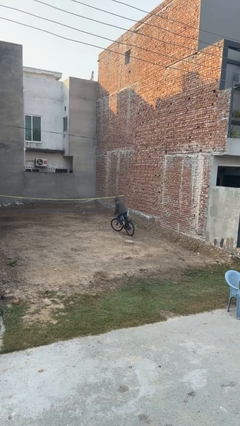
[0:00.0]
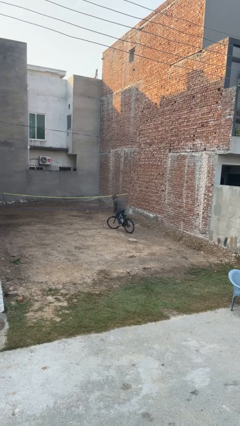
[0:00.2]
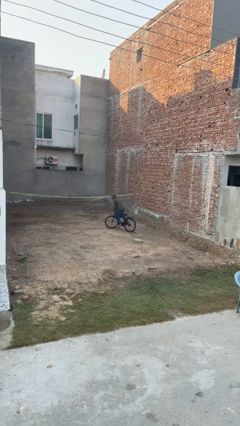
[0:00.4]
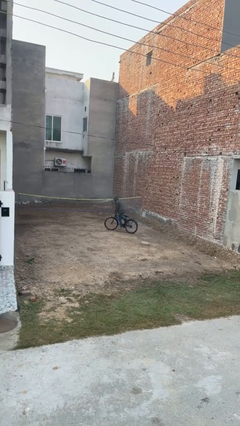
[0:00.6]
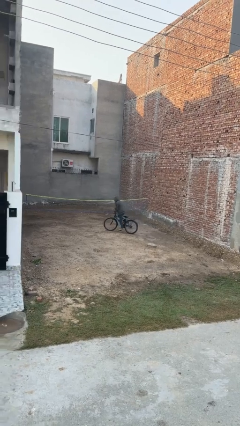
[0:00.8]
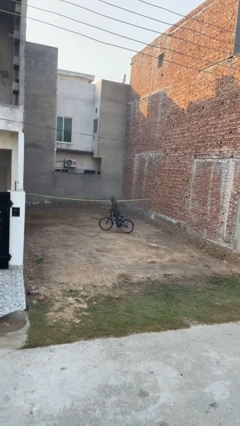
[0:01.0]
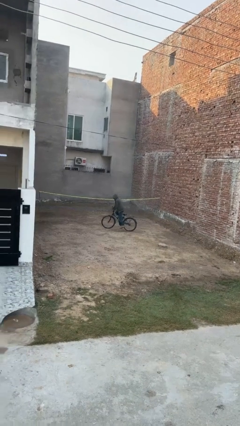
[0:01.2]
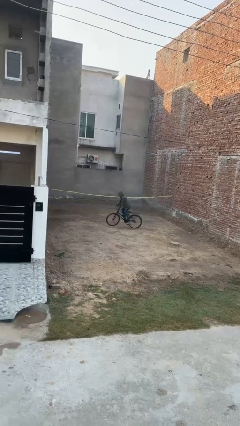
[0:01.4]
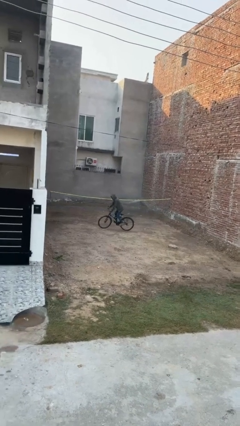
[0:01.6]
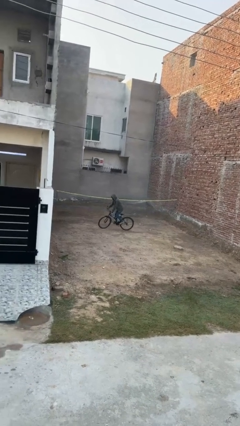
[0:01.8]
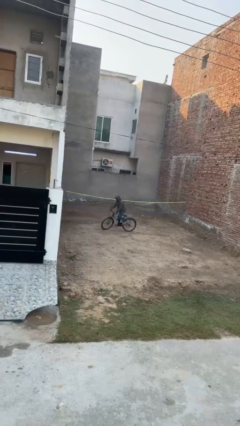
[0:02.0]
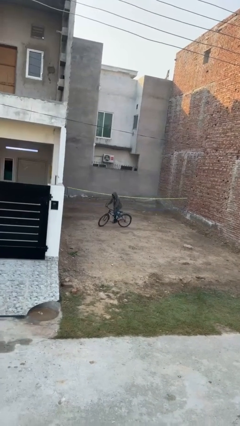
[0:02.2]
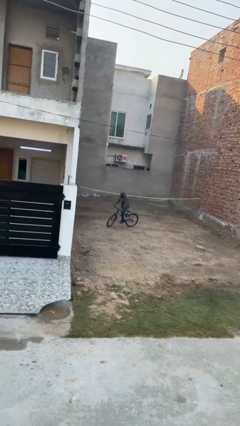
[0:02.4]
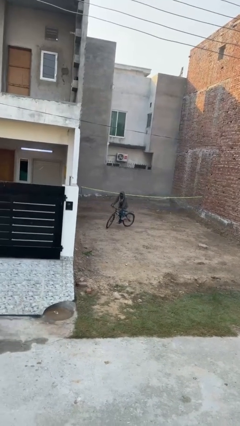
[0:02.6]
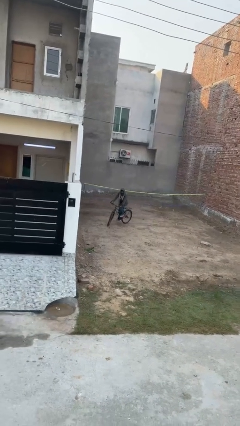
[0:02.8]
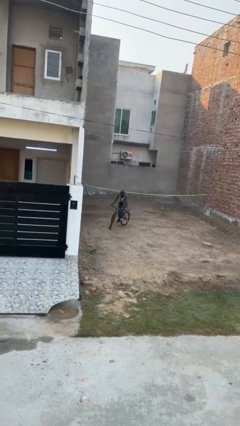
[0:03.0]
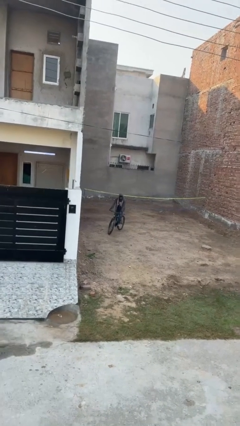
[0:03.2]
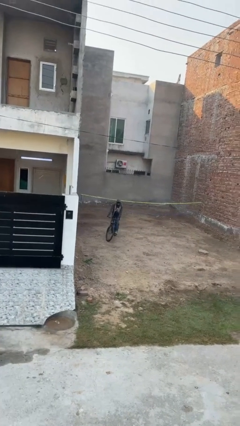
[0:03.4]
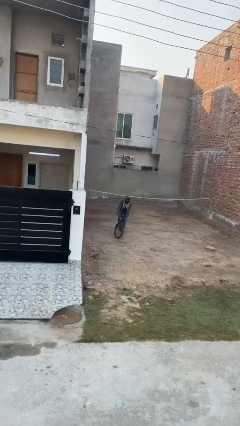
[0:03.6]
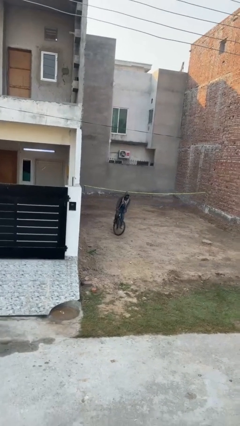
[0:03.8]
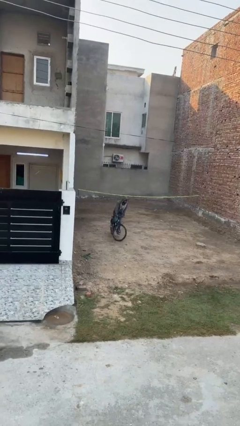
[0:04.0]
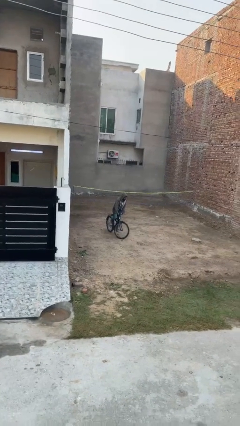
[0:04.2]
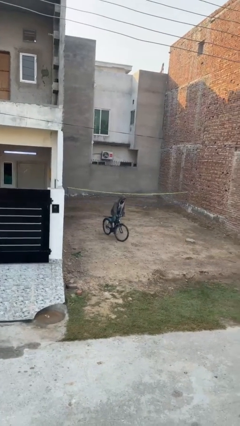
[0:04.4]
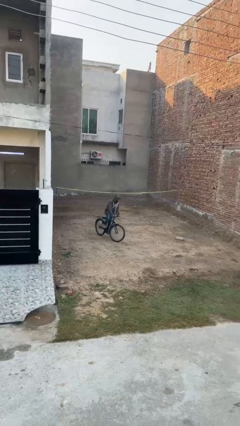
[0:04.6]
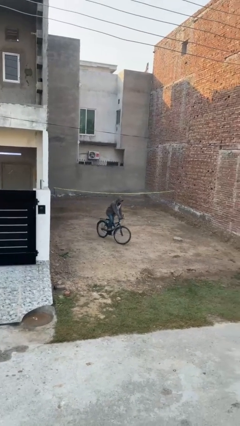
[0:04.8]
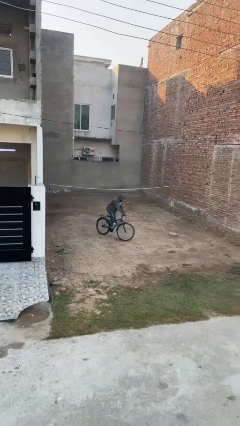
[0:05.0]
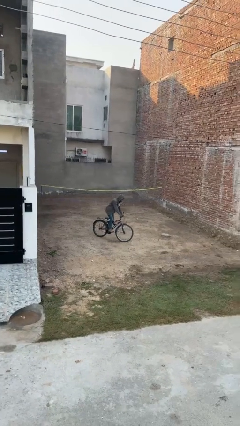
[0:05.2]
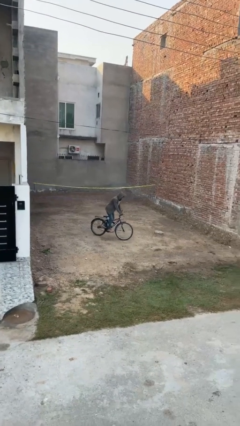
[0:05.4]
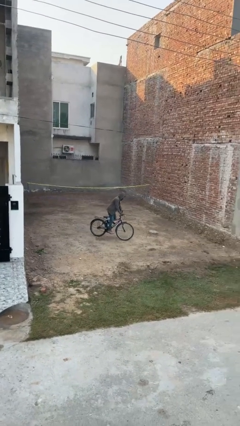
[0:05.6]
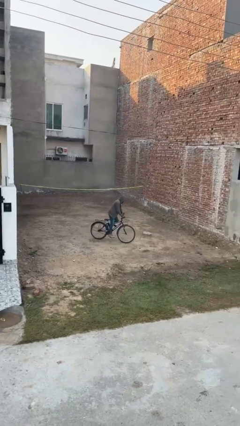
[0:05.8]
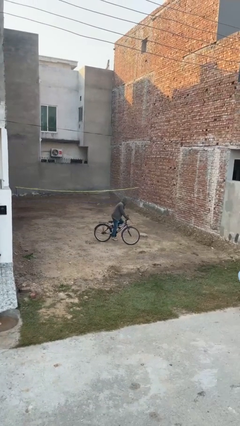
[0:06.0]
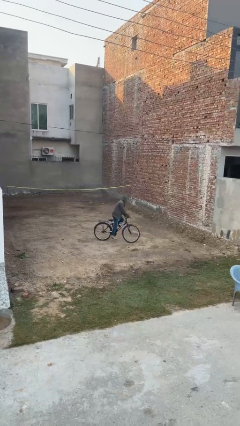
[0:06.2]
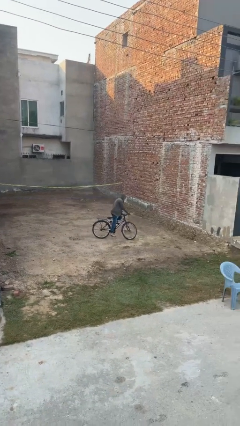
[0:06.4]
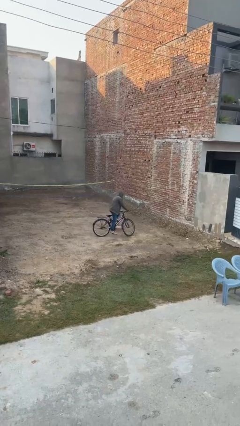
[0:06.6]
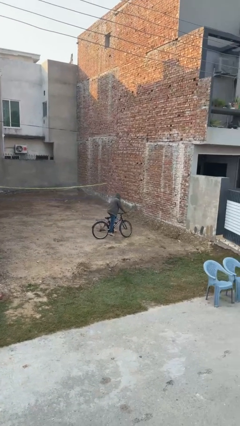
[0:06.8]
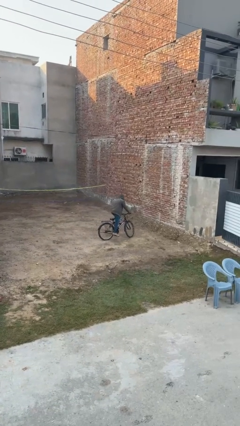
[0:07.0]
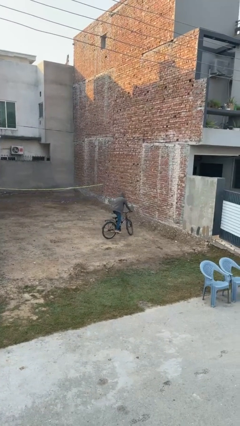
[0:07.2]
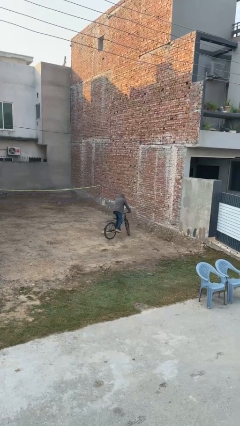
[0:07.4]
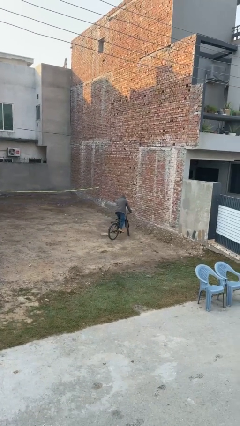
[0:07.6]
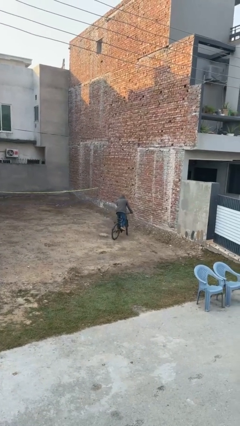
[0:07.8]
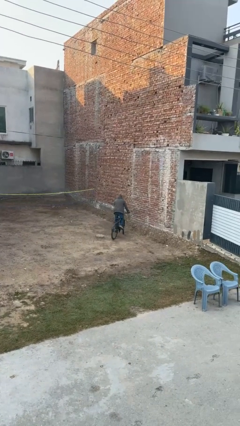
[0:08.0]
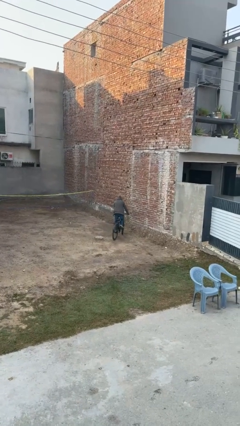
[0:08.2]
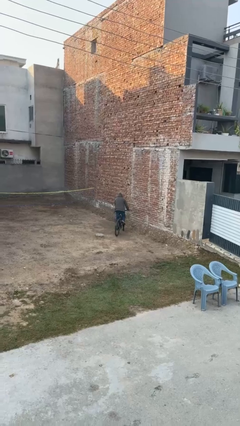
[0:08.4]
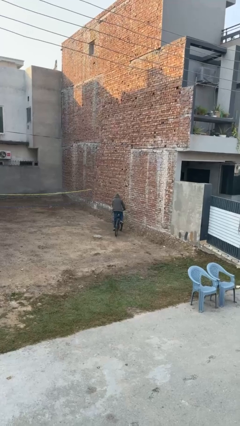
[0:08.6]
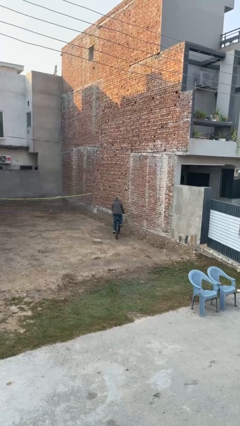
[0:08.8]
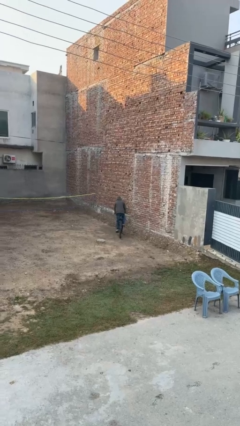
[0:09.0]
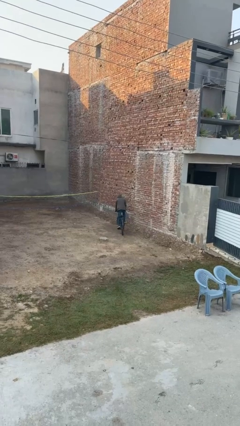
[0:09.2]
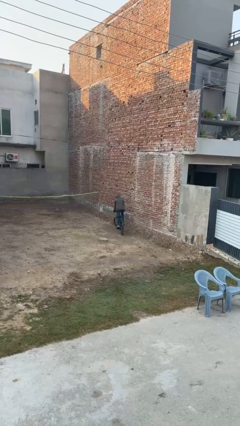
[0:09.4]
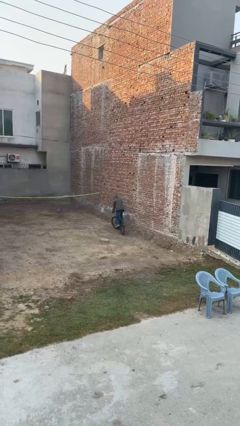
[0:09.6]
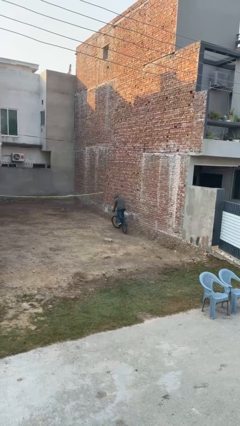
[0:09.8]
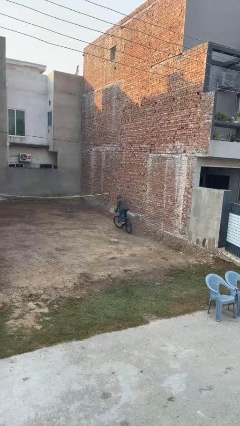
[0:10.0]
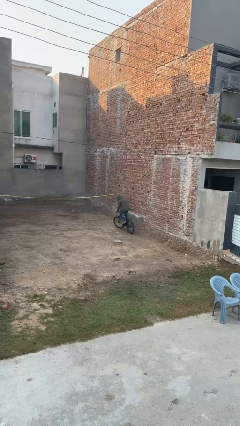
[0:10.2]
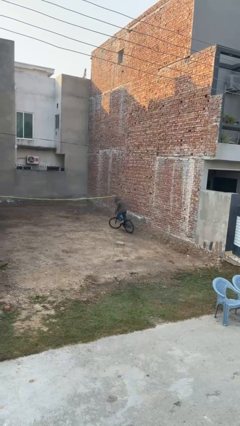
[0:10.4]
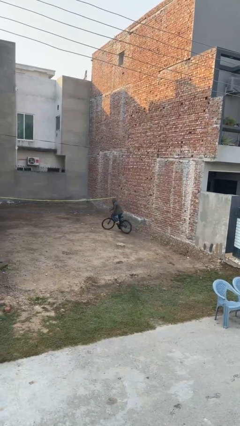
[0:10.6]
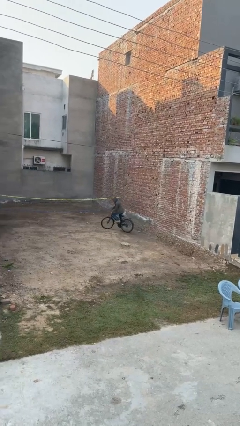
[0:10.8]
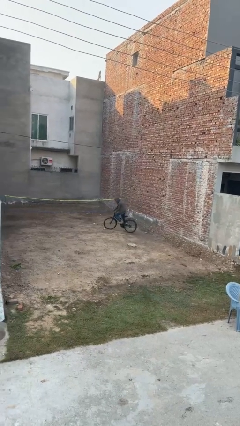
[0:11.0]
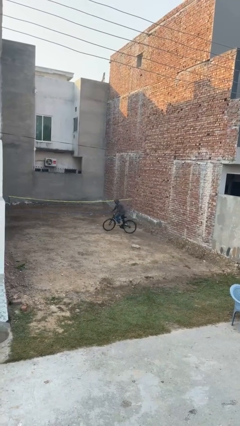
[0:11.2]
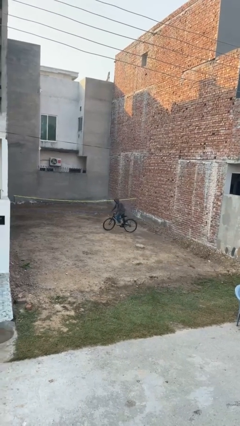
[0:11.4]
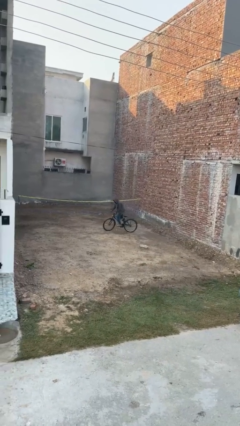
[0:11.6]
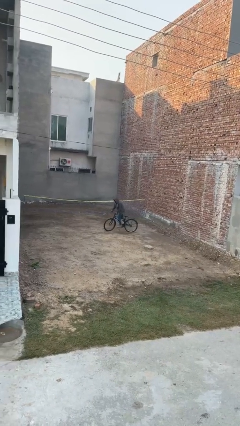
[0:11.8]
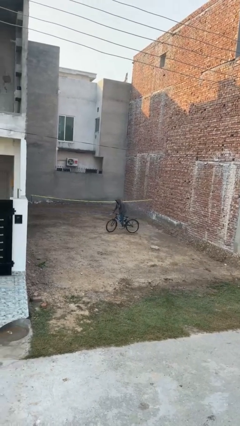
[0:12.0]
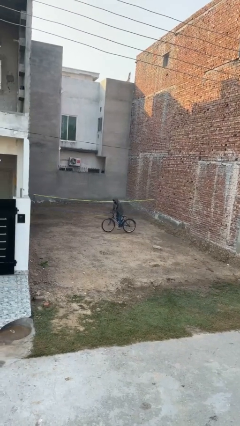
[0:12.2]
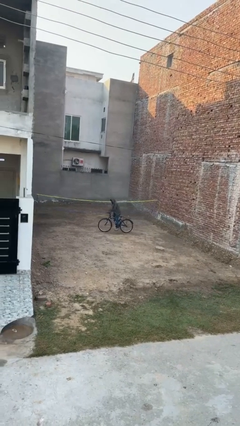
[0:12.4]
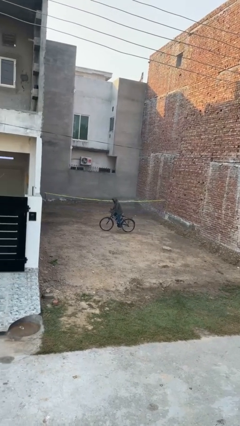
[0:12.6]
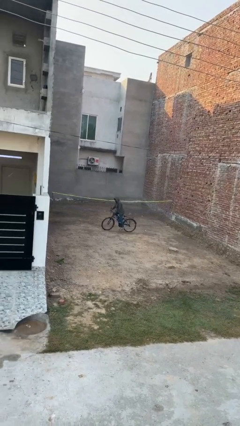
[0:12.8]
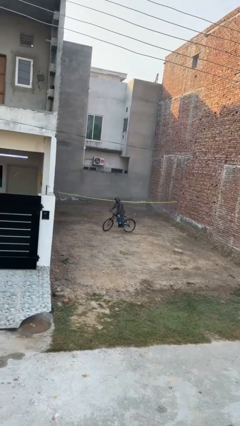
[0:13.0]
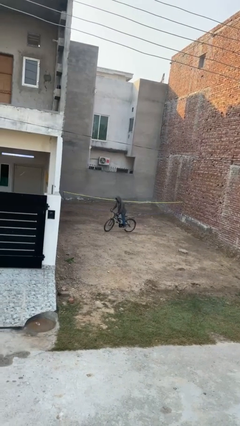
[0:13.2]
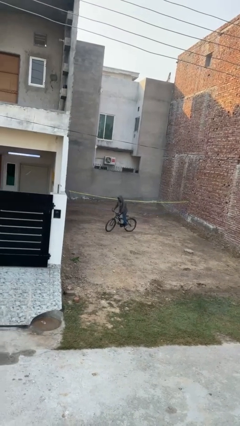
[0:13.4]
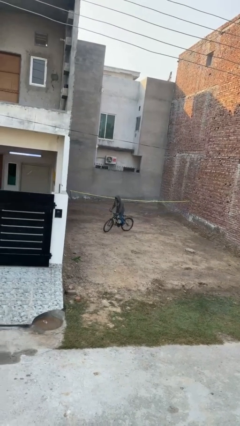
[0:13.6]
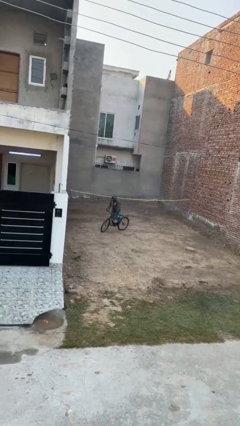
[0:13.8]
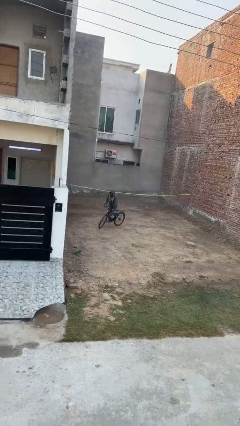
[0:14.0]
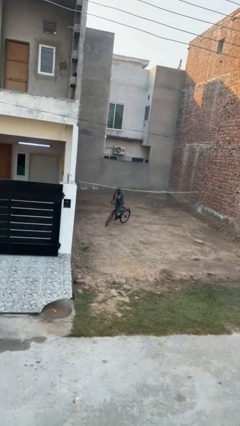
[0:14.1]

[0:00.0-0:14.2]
person rides bicycle

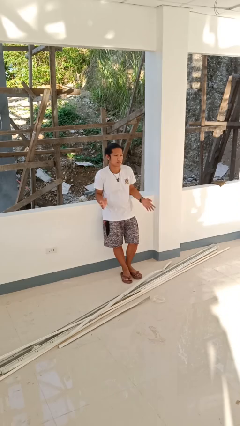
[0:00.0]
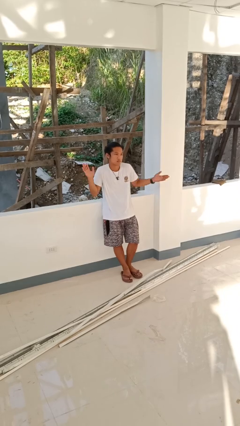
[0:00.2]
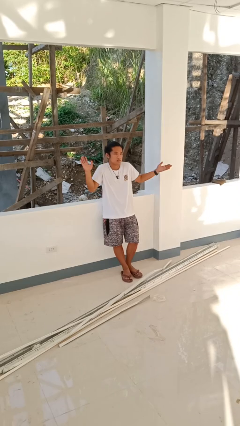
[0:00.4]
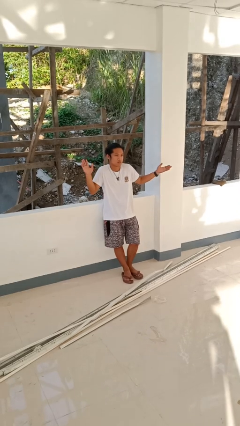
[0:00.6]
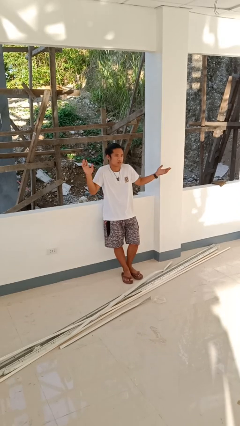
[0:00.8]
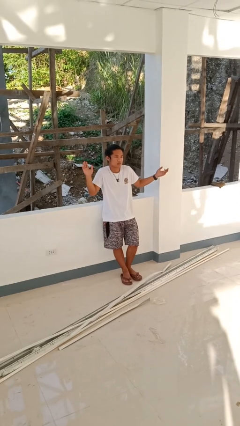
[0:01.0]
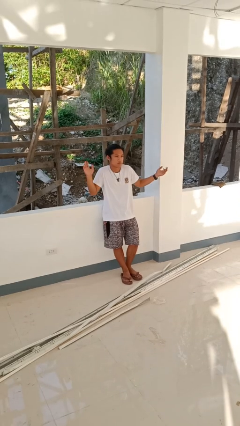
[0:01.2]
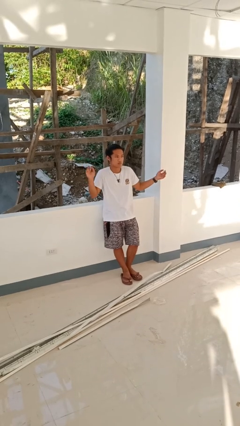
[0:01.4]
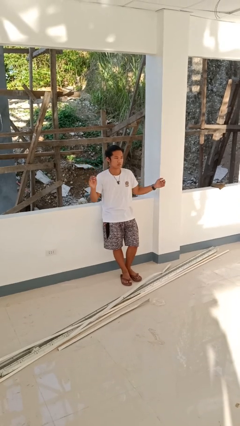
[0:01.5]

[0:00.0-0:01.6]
person shrugs

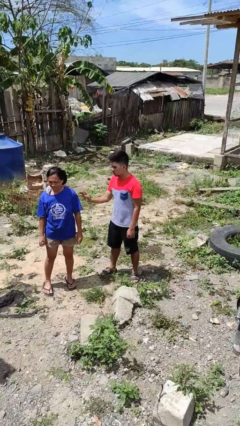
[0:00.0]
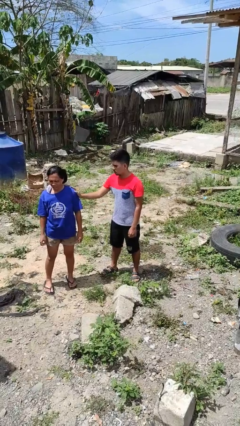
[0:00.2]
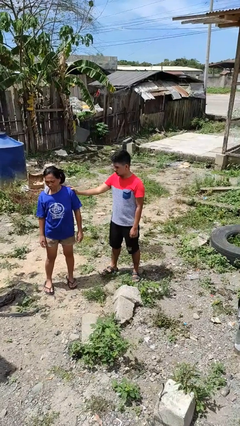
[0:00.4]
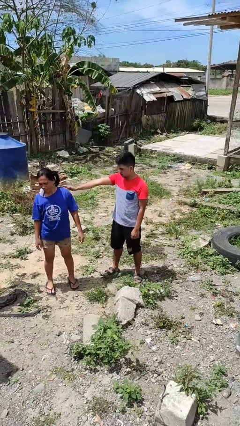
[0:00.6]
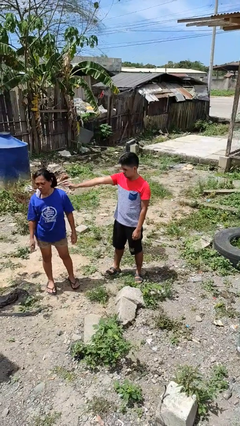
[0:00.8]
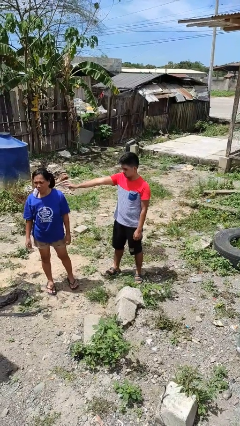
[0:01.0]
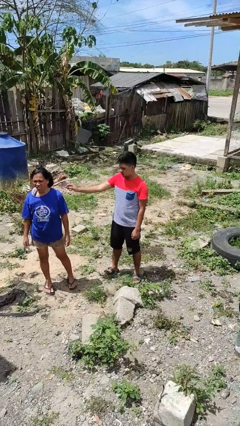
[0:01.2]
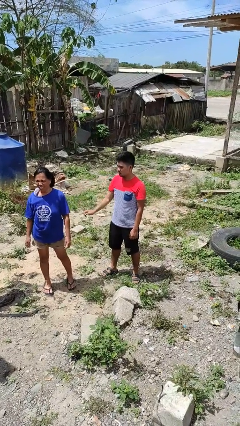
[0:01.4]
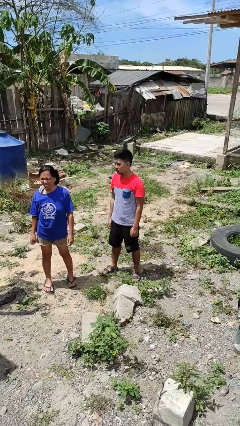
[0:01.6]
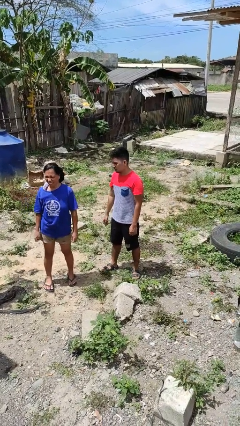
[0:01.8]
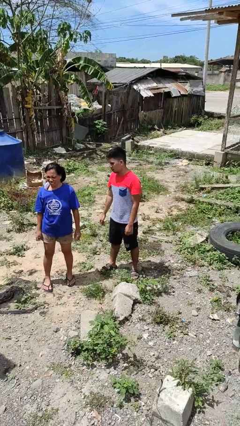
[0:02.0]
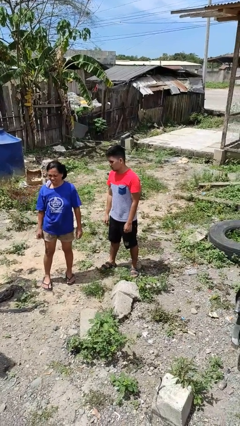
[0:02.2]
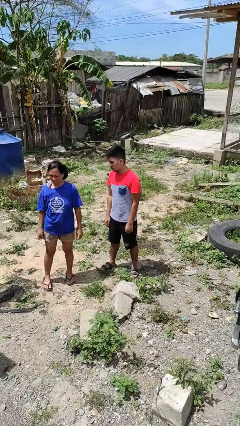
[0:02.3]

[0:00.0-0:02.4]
person shoves person
